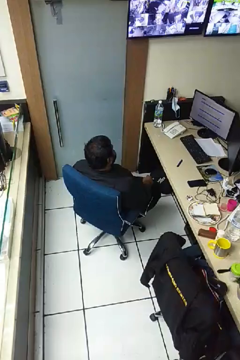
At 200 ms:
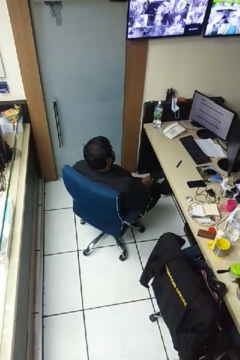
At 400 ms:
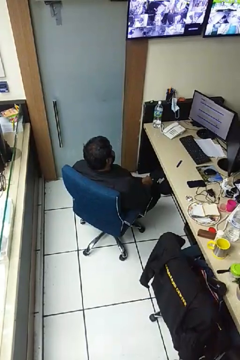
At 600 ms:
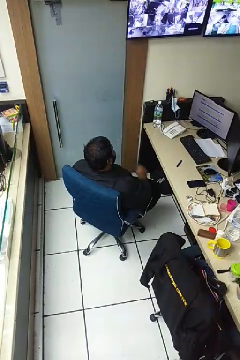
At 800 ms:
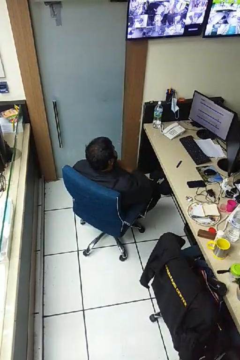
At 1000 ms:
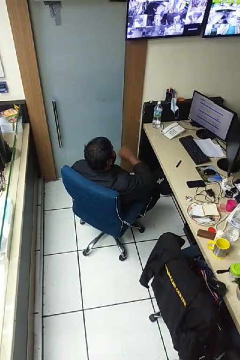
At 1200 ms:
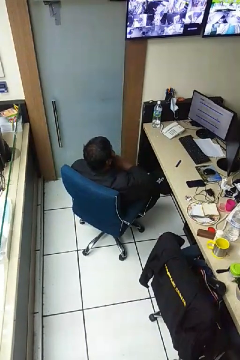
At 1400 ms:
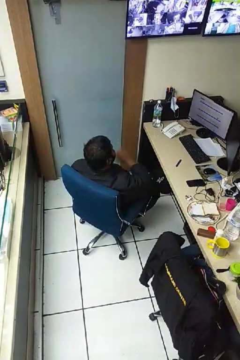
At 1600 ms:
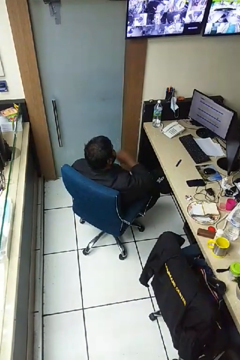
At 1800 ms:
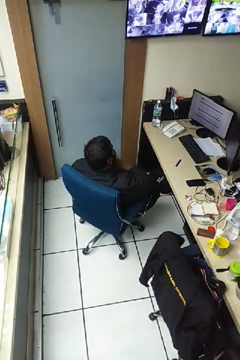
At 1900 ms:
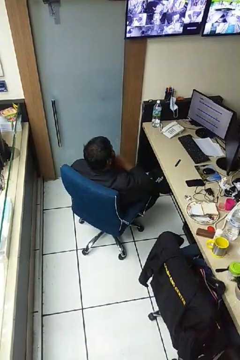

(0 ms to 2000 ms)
person drums on chest

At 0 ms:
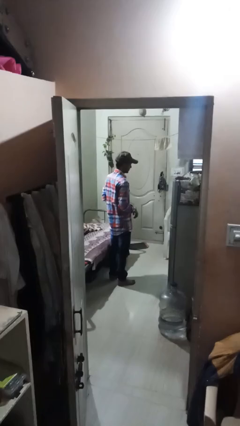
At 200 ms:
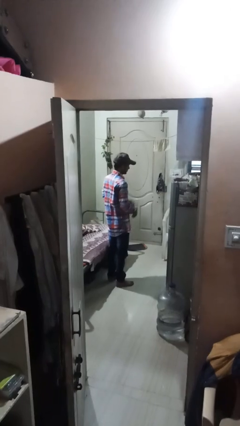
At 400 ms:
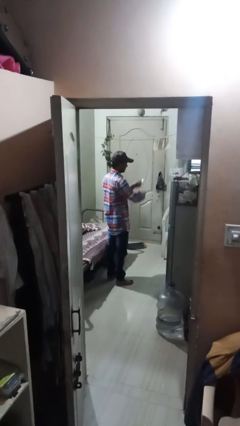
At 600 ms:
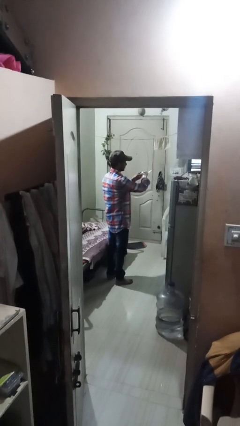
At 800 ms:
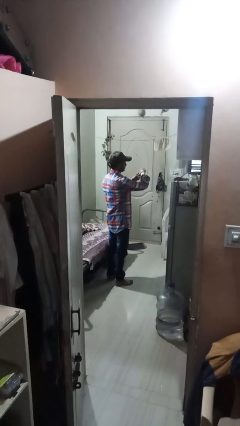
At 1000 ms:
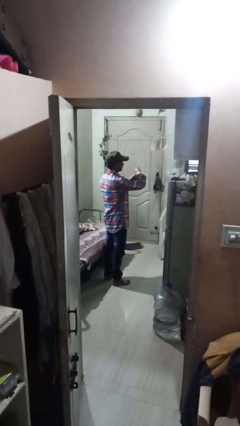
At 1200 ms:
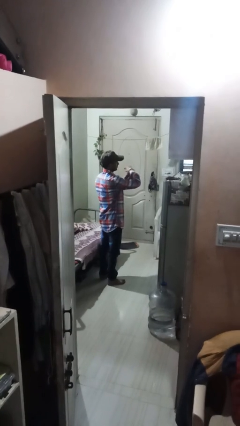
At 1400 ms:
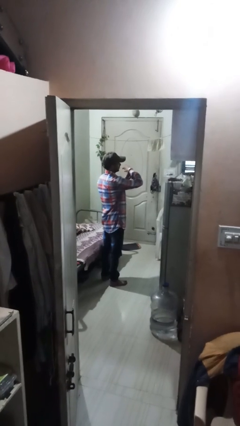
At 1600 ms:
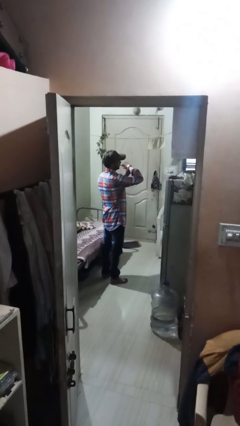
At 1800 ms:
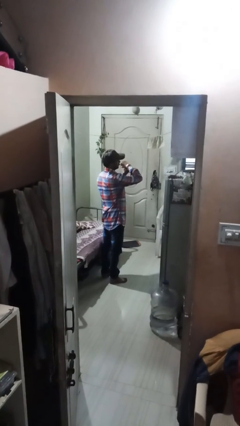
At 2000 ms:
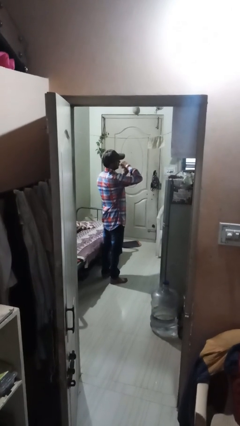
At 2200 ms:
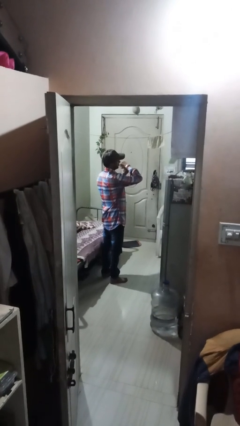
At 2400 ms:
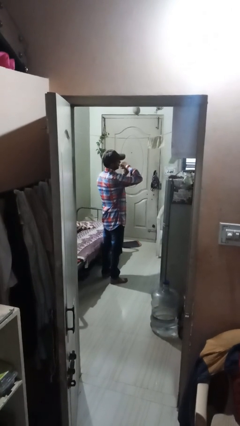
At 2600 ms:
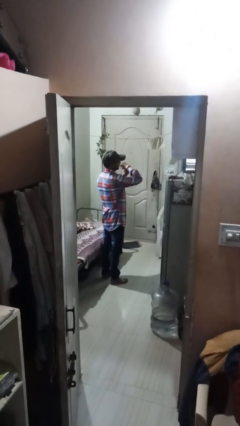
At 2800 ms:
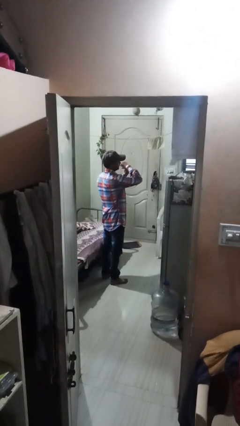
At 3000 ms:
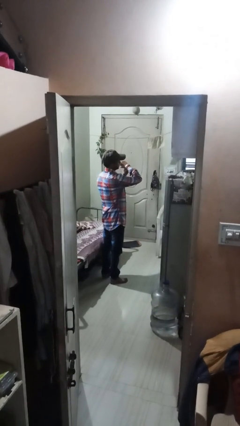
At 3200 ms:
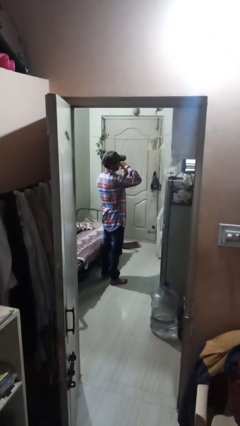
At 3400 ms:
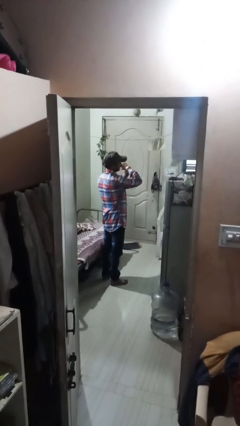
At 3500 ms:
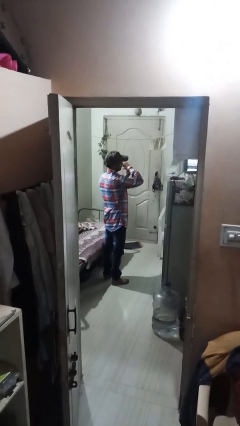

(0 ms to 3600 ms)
person puts on wristwatch

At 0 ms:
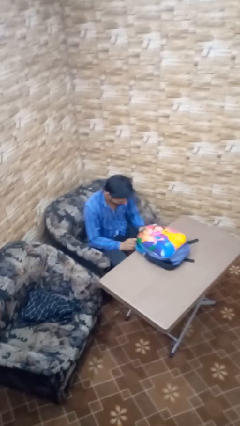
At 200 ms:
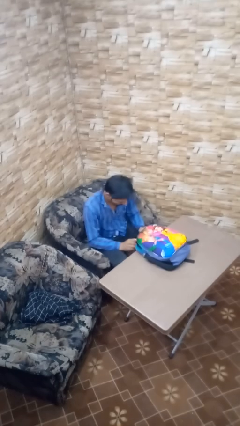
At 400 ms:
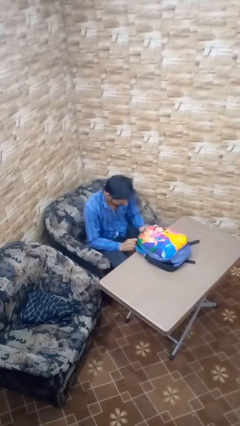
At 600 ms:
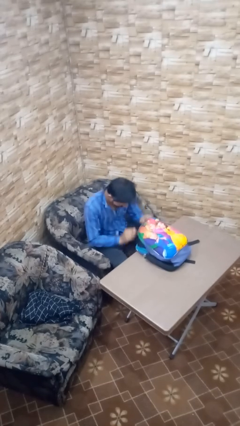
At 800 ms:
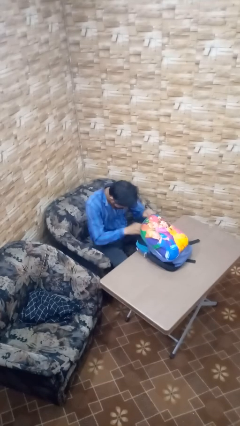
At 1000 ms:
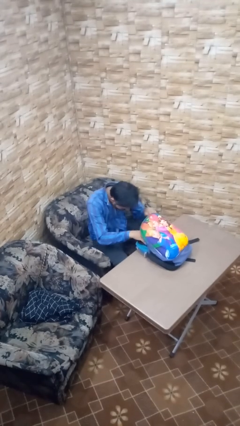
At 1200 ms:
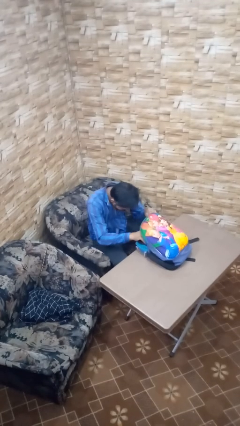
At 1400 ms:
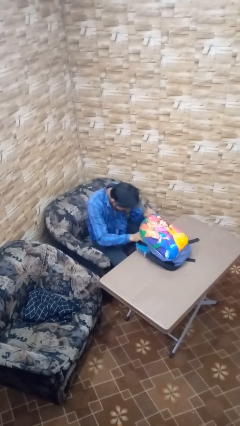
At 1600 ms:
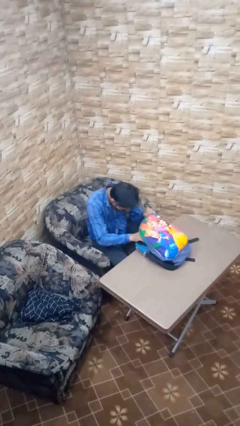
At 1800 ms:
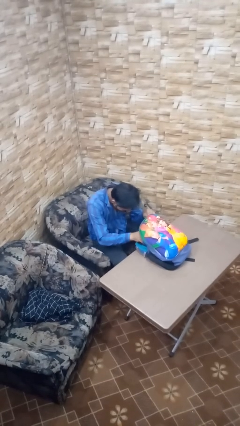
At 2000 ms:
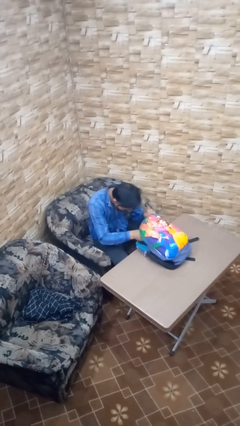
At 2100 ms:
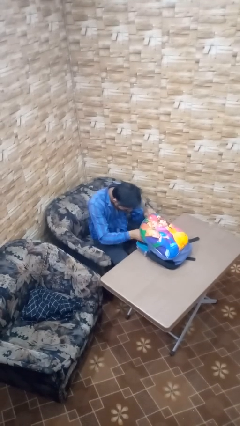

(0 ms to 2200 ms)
person searches in backpack

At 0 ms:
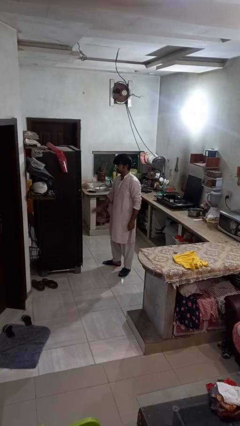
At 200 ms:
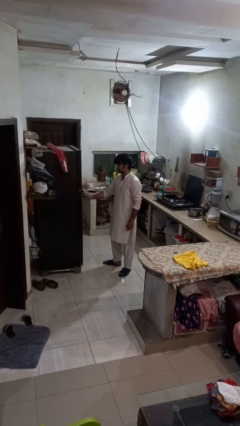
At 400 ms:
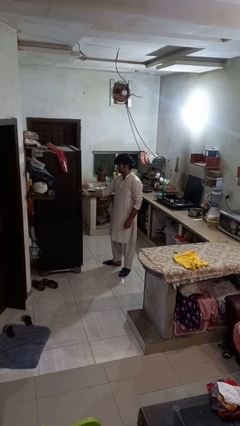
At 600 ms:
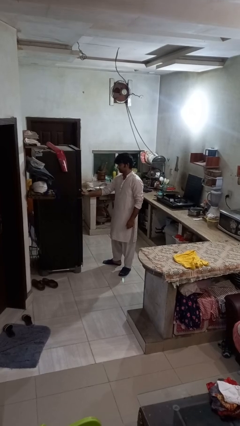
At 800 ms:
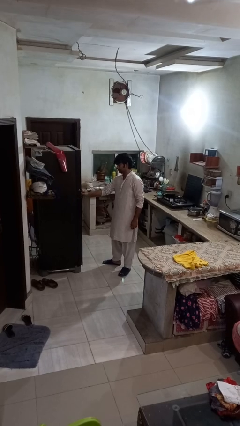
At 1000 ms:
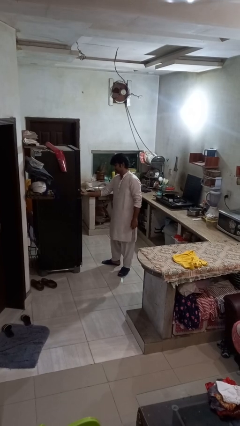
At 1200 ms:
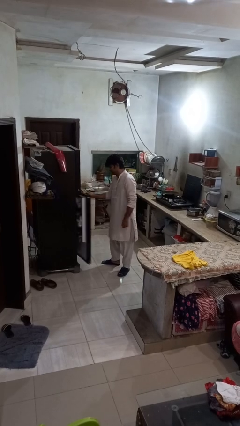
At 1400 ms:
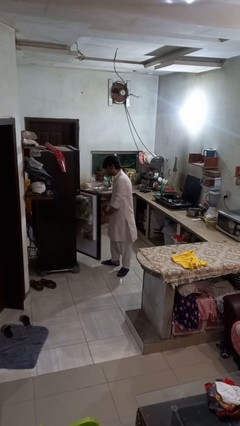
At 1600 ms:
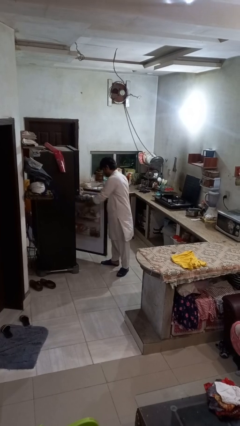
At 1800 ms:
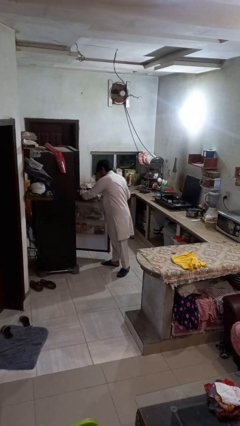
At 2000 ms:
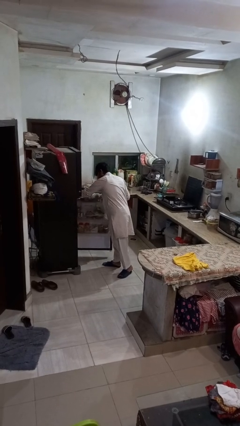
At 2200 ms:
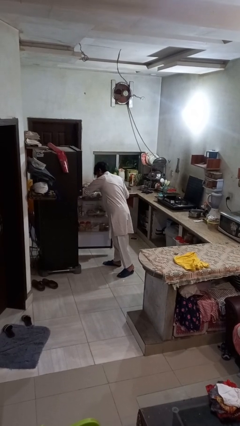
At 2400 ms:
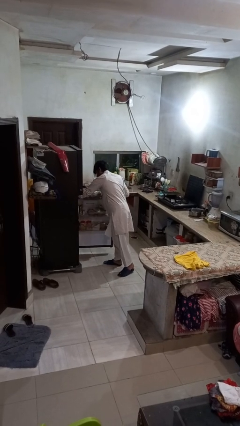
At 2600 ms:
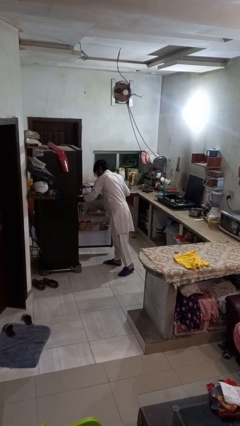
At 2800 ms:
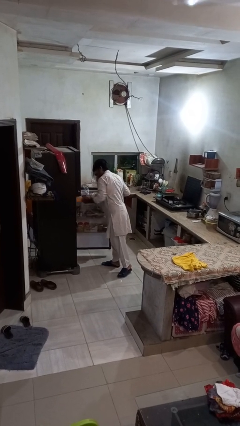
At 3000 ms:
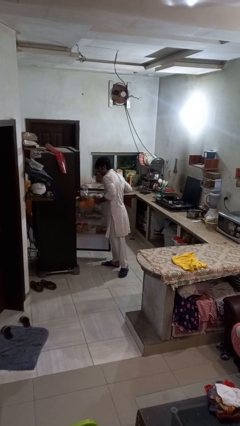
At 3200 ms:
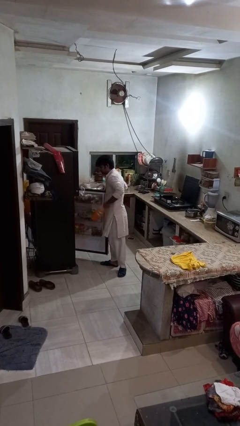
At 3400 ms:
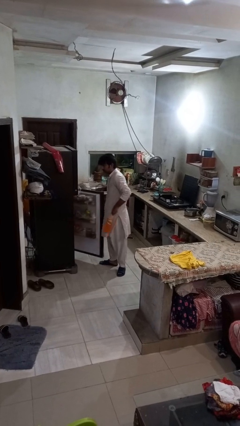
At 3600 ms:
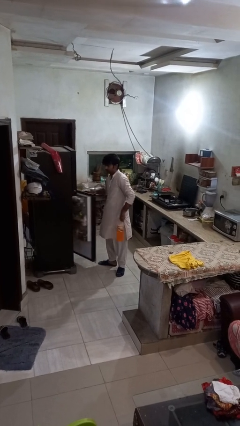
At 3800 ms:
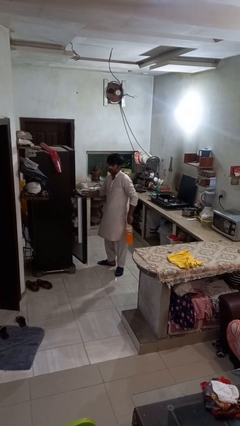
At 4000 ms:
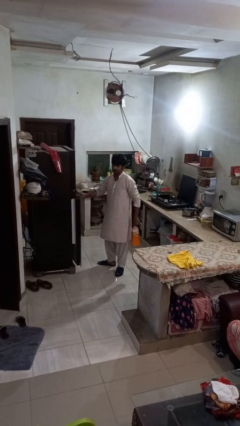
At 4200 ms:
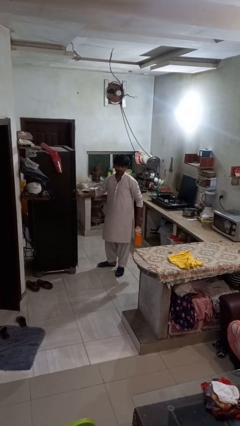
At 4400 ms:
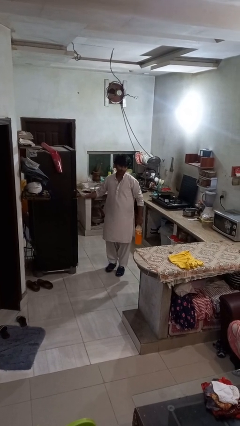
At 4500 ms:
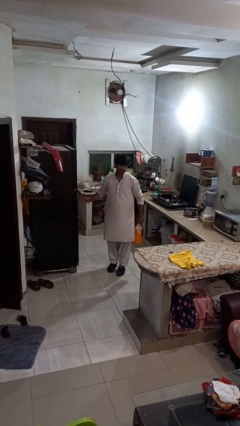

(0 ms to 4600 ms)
person takes object from refrigerator

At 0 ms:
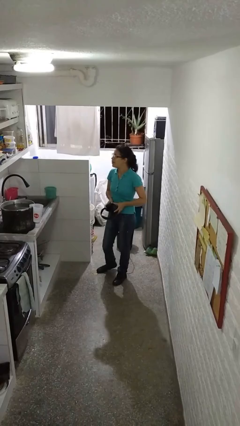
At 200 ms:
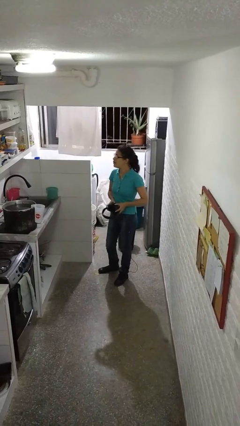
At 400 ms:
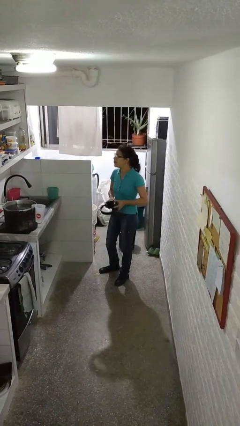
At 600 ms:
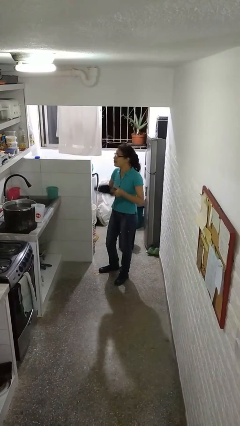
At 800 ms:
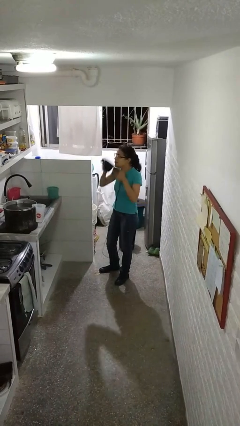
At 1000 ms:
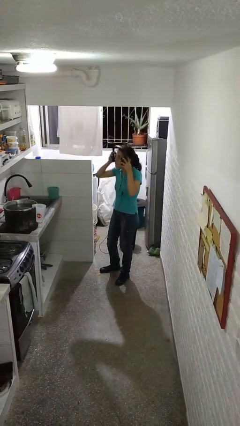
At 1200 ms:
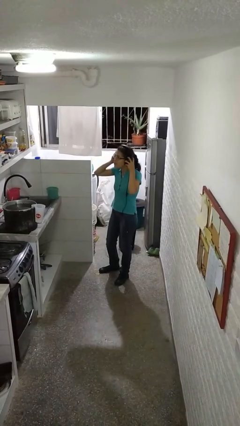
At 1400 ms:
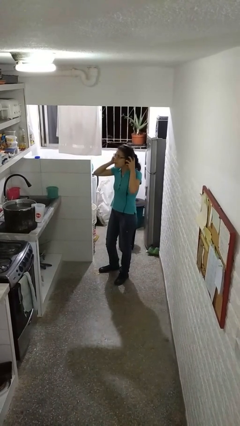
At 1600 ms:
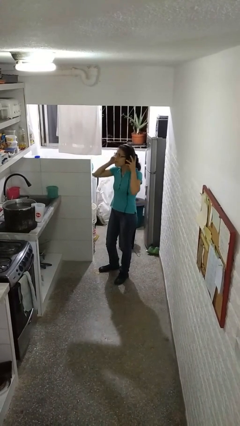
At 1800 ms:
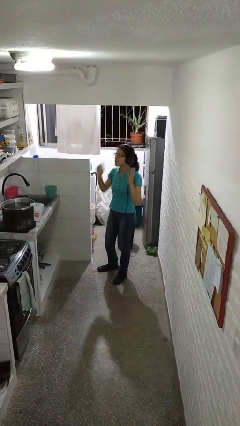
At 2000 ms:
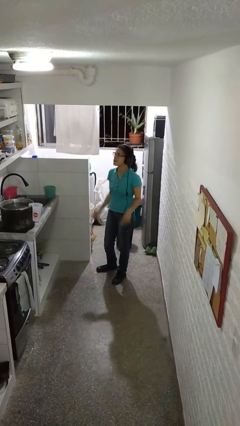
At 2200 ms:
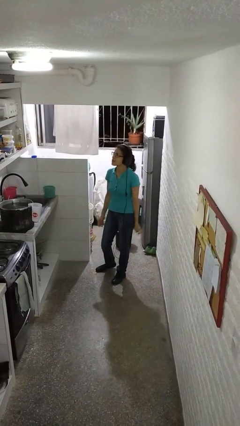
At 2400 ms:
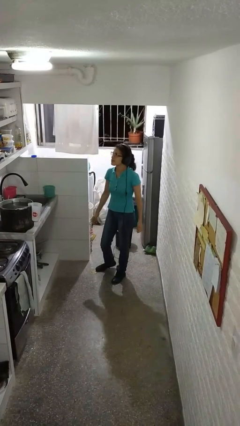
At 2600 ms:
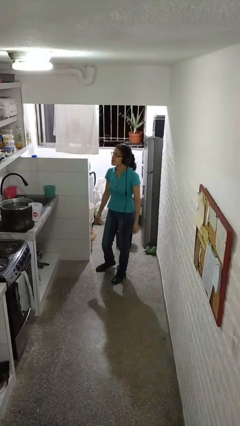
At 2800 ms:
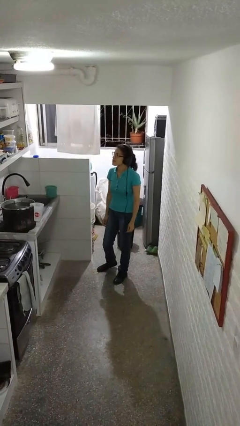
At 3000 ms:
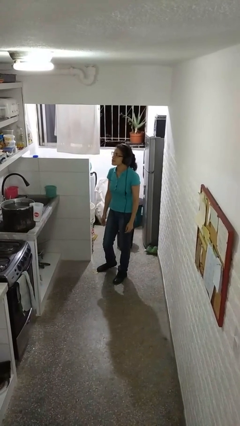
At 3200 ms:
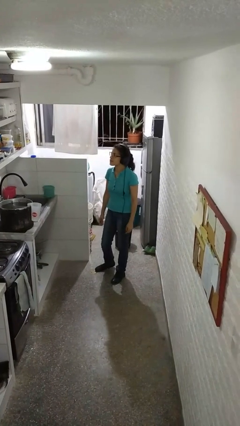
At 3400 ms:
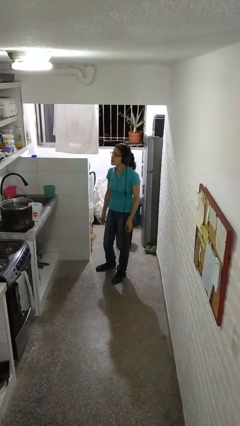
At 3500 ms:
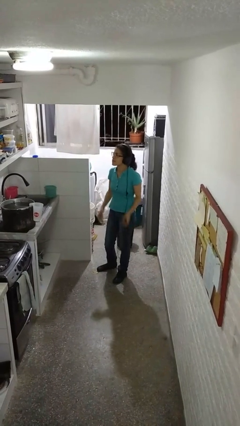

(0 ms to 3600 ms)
person puts on headphones

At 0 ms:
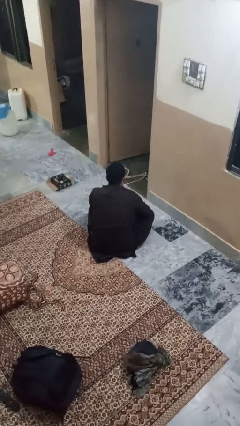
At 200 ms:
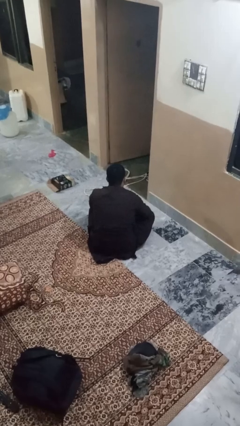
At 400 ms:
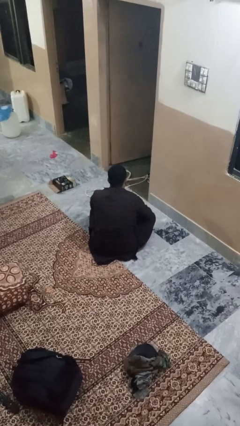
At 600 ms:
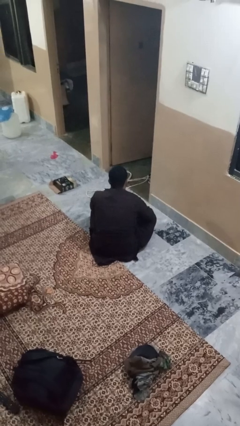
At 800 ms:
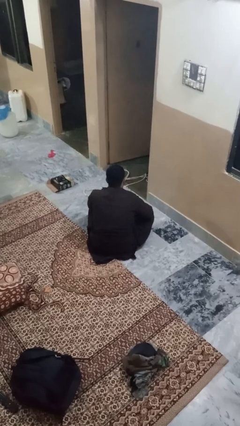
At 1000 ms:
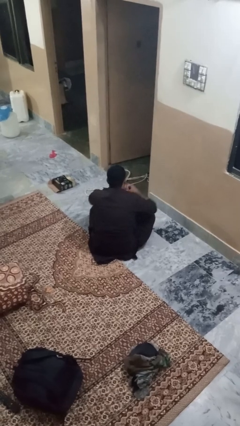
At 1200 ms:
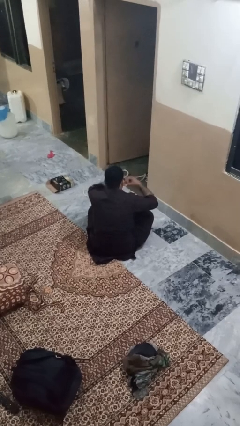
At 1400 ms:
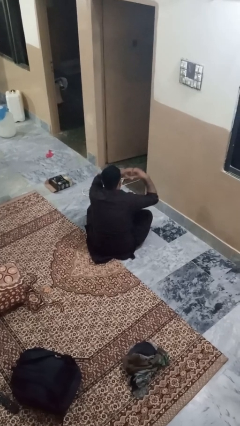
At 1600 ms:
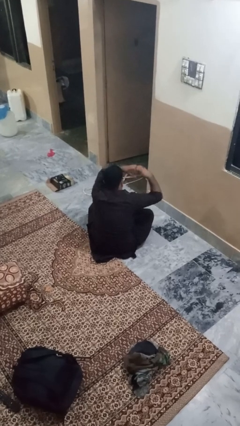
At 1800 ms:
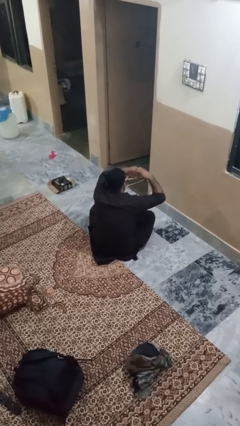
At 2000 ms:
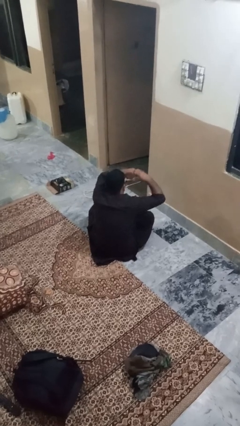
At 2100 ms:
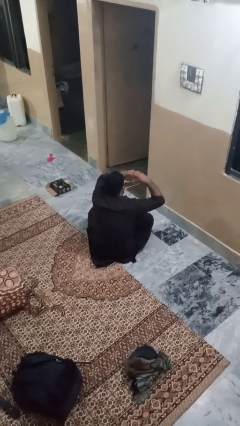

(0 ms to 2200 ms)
person gestures heart
